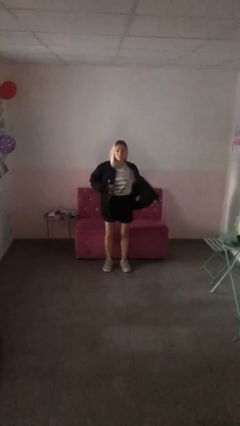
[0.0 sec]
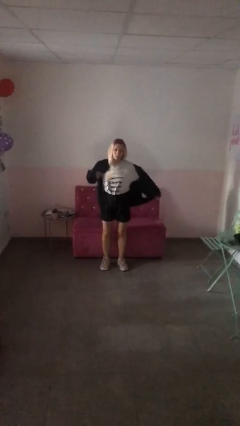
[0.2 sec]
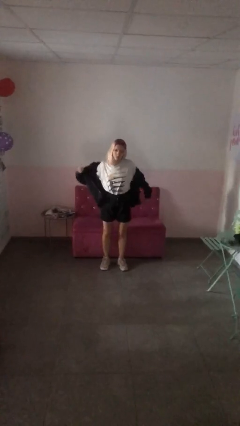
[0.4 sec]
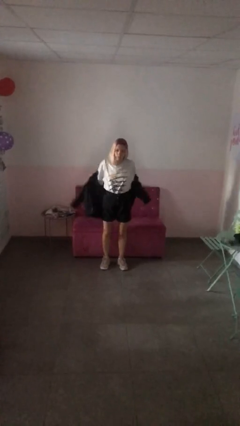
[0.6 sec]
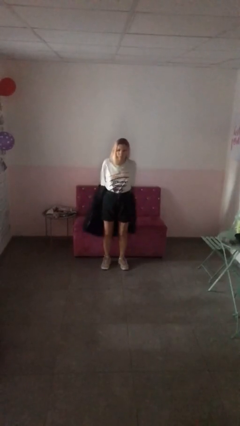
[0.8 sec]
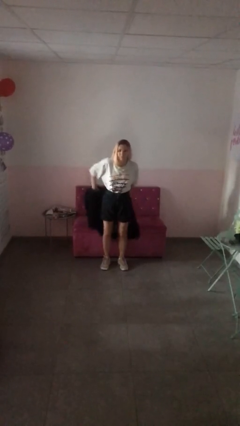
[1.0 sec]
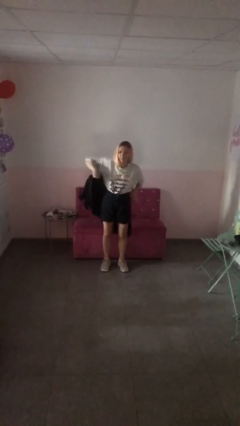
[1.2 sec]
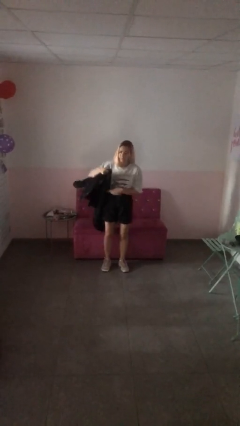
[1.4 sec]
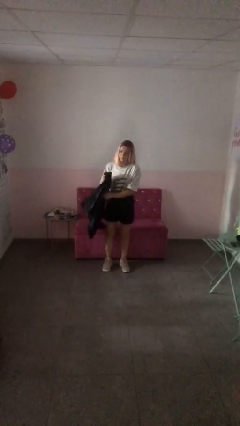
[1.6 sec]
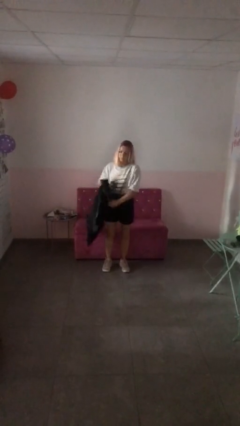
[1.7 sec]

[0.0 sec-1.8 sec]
person takes off jacket

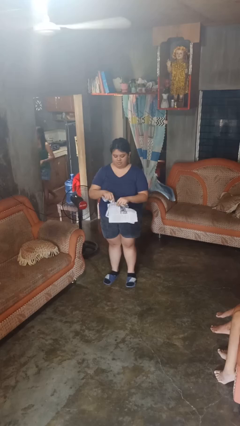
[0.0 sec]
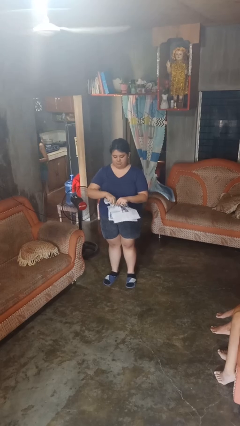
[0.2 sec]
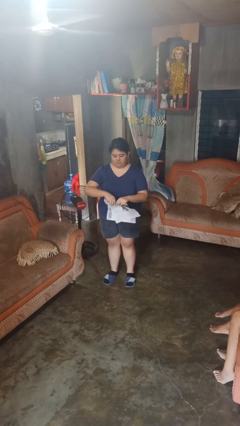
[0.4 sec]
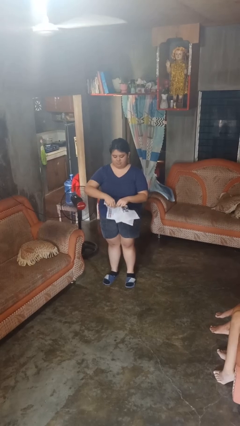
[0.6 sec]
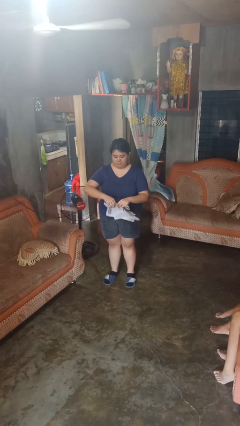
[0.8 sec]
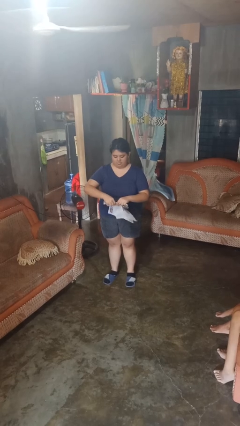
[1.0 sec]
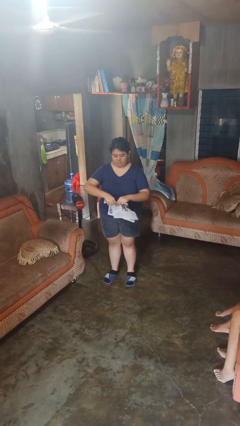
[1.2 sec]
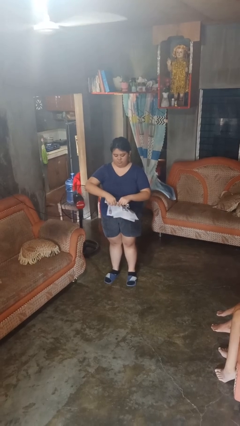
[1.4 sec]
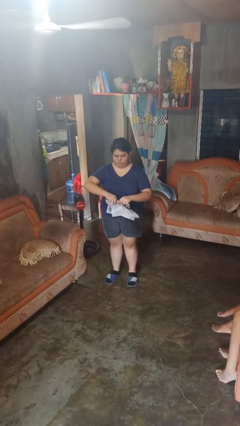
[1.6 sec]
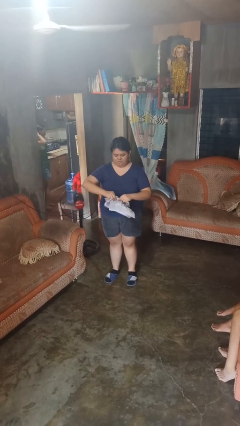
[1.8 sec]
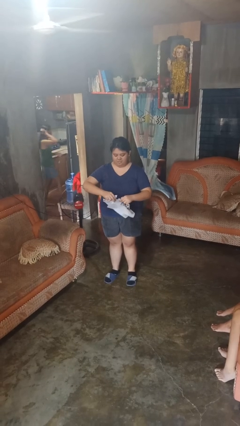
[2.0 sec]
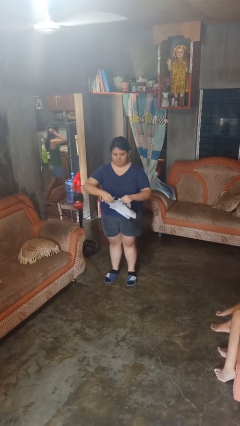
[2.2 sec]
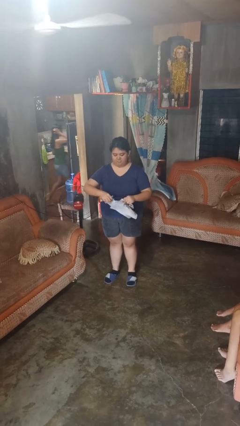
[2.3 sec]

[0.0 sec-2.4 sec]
person tears paper

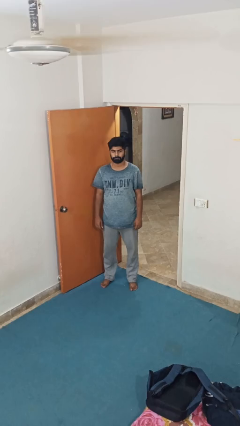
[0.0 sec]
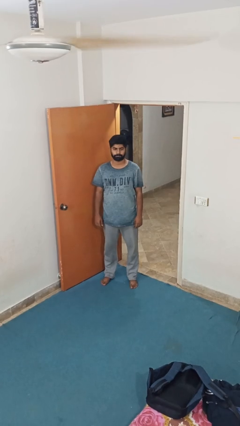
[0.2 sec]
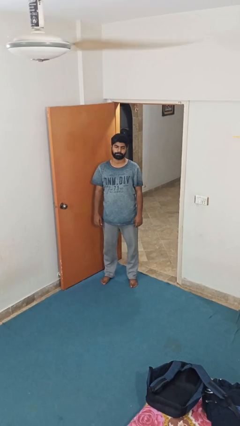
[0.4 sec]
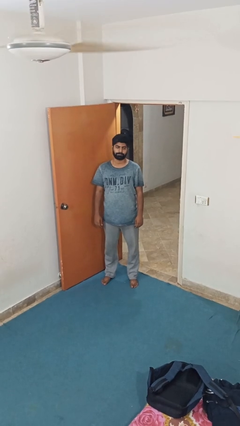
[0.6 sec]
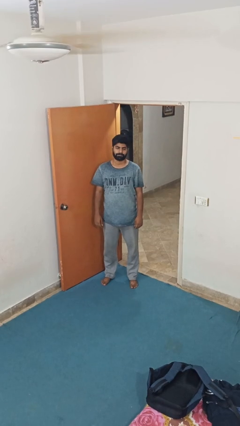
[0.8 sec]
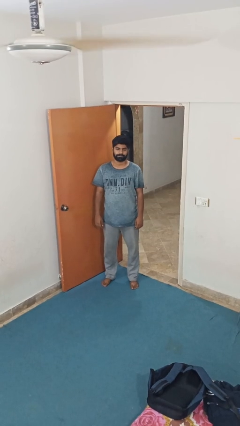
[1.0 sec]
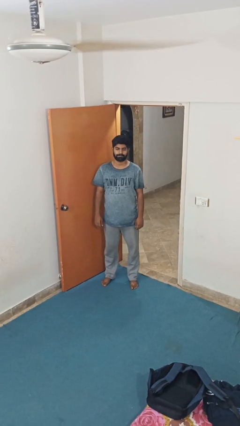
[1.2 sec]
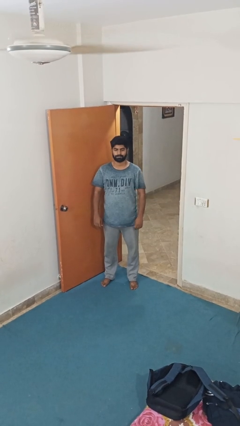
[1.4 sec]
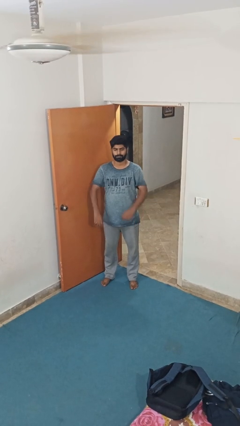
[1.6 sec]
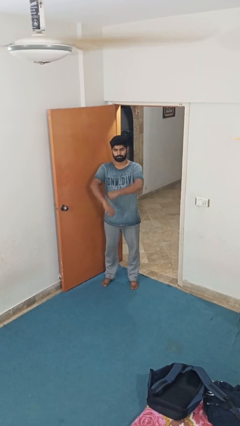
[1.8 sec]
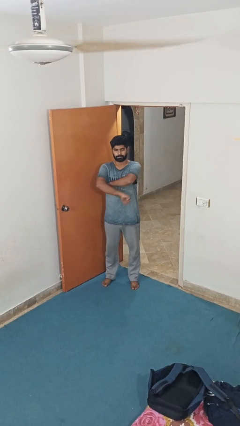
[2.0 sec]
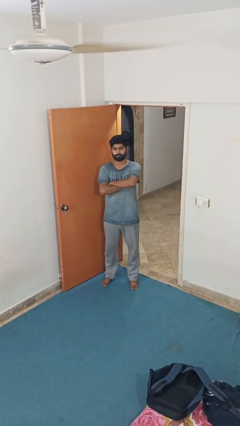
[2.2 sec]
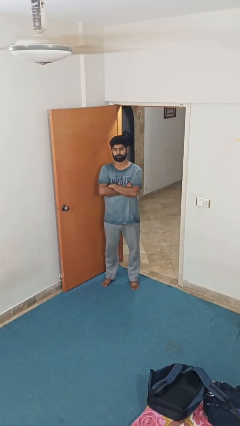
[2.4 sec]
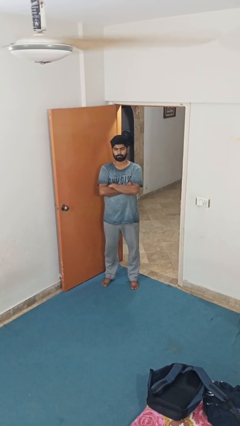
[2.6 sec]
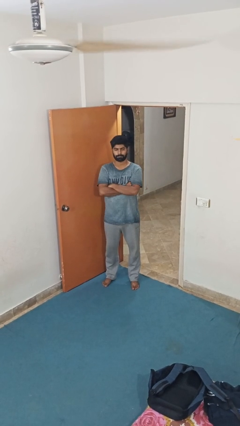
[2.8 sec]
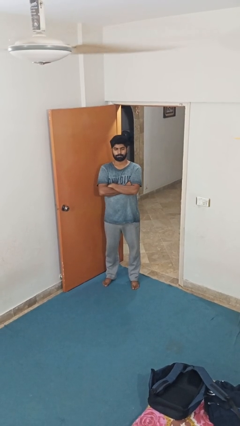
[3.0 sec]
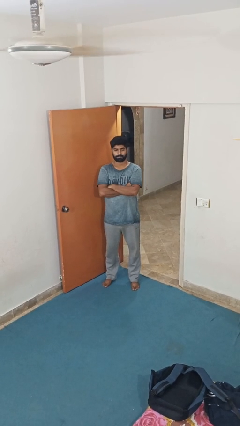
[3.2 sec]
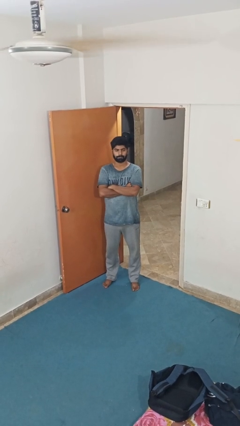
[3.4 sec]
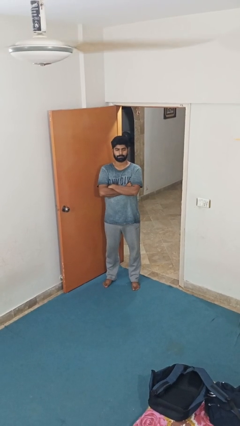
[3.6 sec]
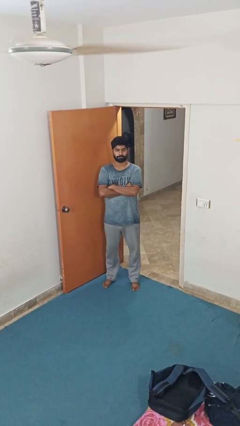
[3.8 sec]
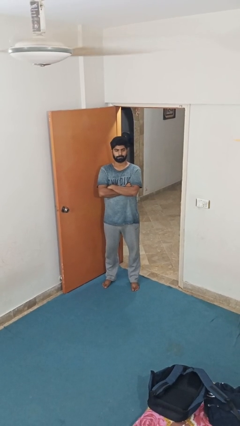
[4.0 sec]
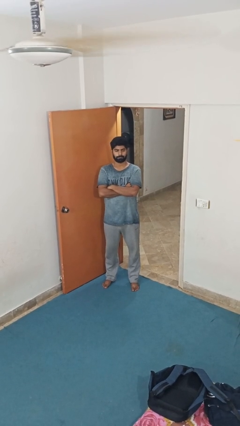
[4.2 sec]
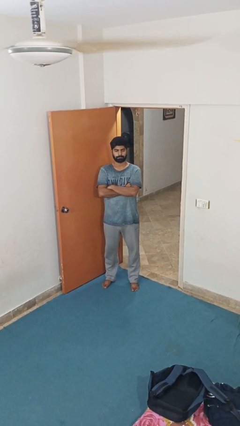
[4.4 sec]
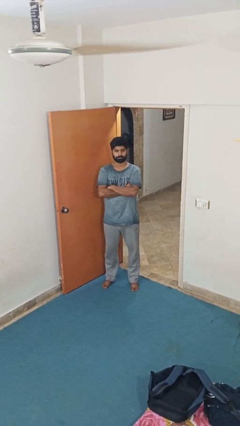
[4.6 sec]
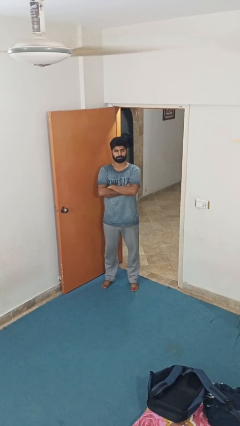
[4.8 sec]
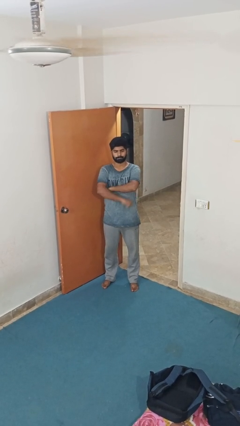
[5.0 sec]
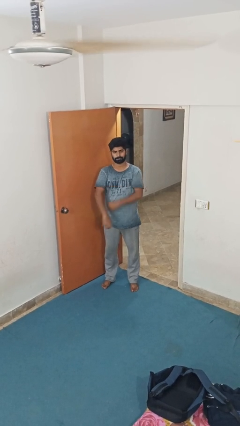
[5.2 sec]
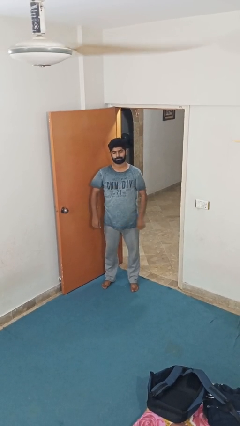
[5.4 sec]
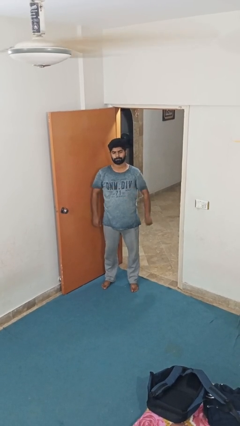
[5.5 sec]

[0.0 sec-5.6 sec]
person crosses arms

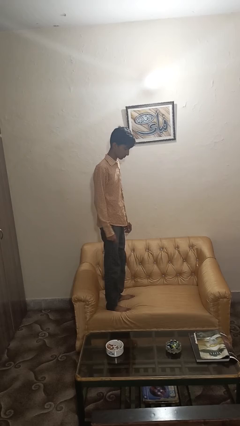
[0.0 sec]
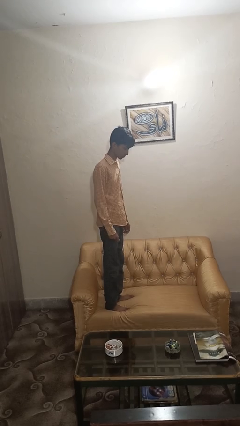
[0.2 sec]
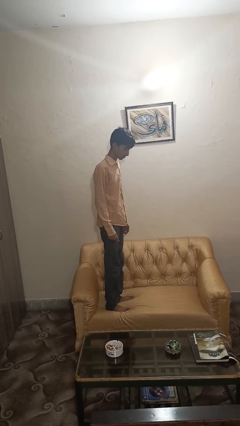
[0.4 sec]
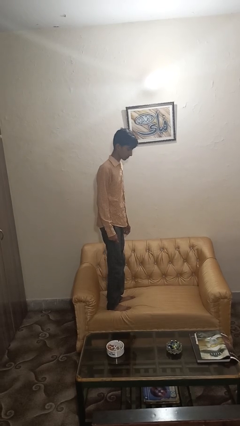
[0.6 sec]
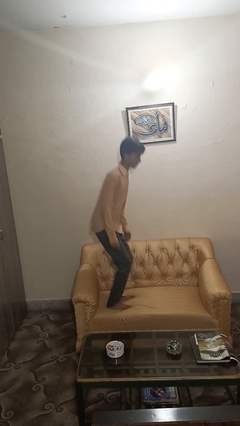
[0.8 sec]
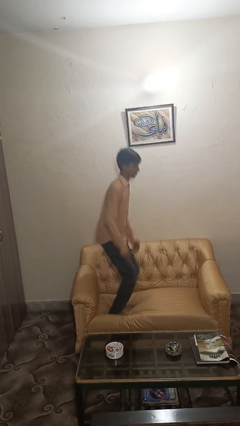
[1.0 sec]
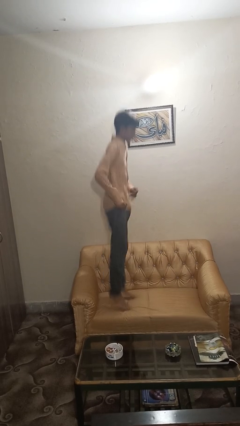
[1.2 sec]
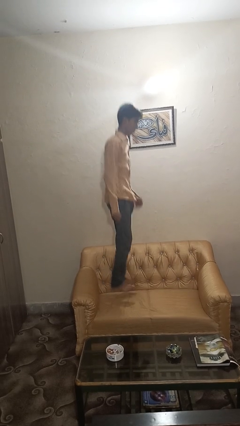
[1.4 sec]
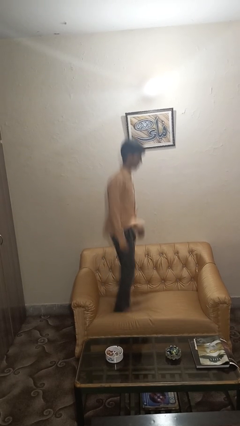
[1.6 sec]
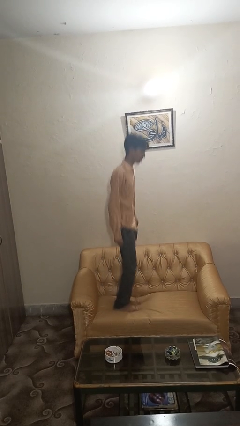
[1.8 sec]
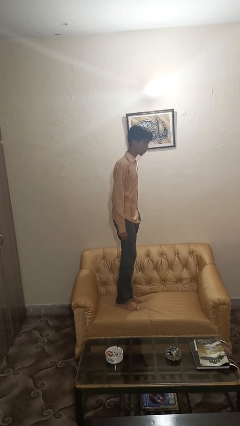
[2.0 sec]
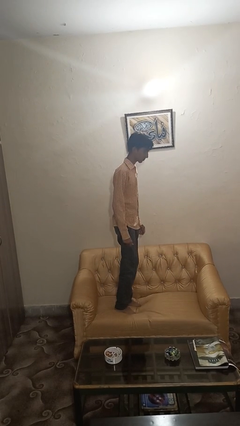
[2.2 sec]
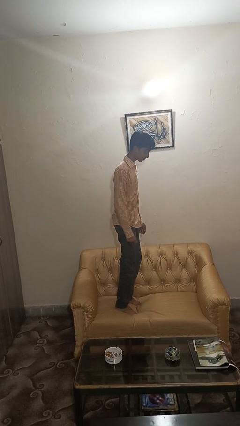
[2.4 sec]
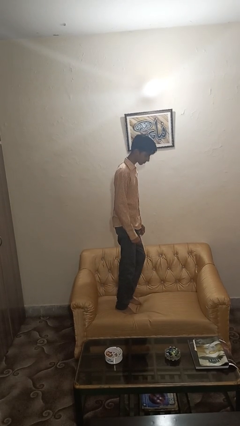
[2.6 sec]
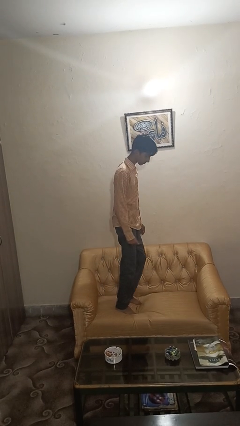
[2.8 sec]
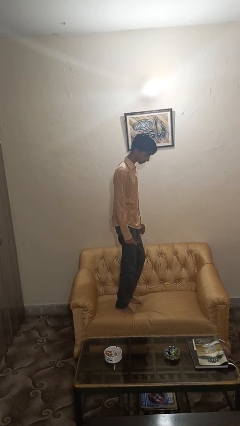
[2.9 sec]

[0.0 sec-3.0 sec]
person jumps on couch

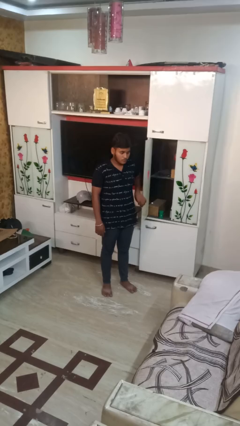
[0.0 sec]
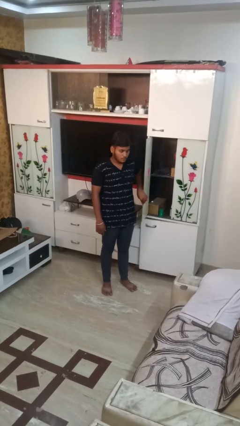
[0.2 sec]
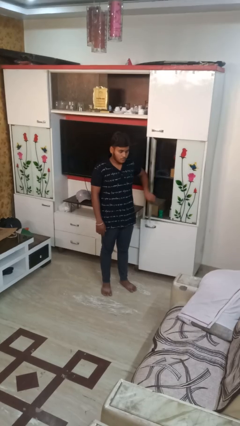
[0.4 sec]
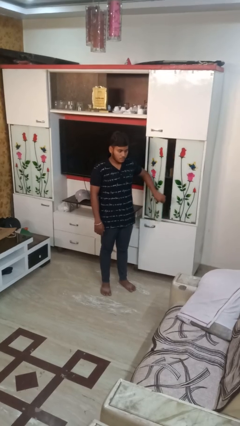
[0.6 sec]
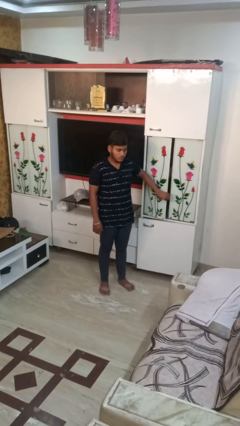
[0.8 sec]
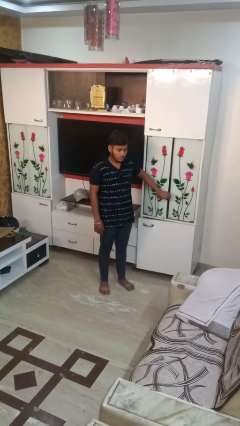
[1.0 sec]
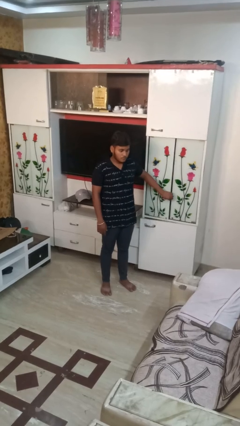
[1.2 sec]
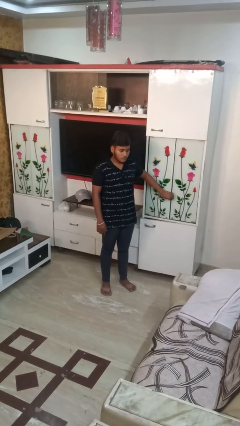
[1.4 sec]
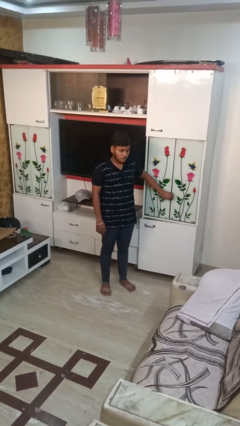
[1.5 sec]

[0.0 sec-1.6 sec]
person closes closet door

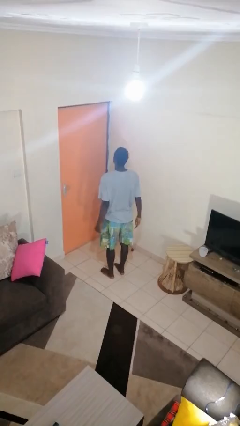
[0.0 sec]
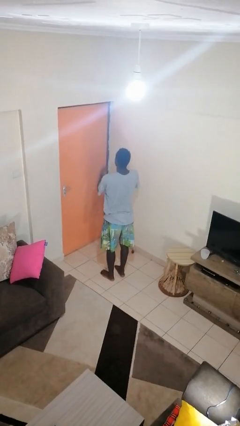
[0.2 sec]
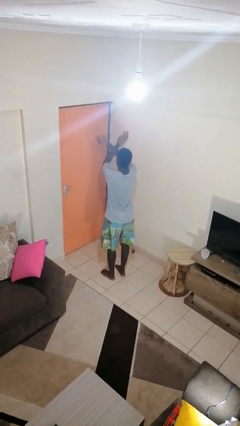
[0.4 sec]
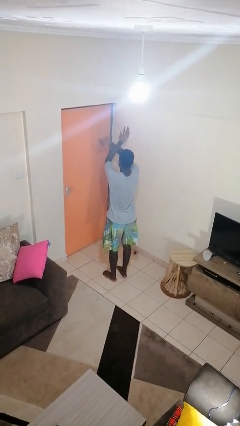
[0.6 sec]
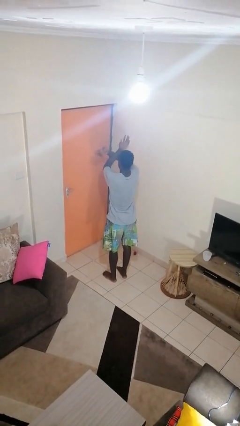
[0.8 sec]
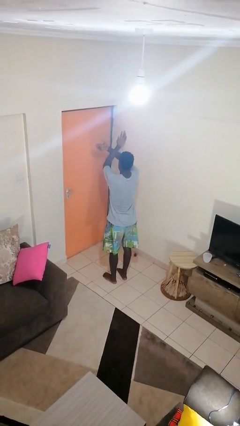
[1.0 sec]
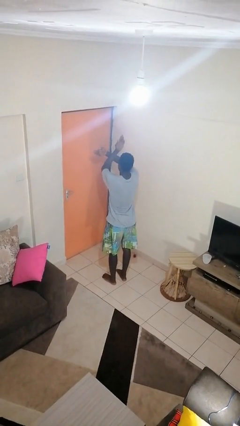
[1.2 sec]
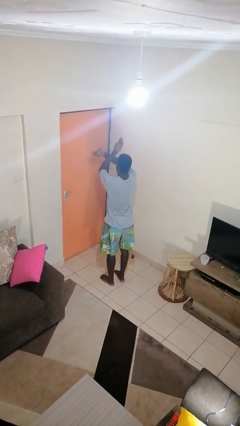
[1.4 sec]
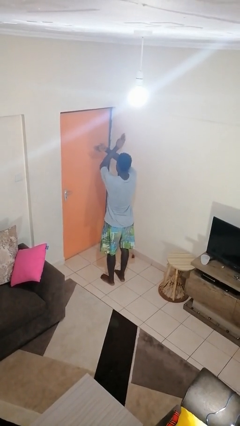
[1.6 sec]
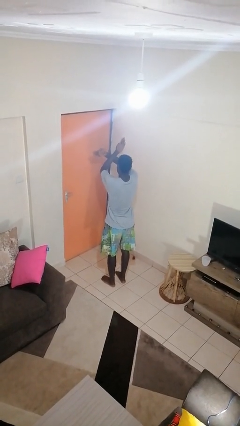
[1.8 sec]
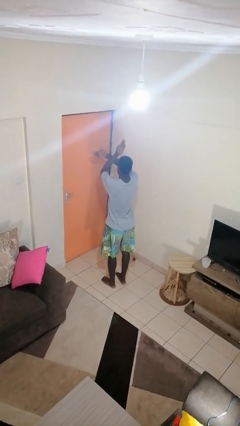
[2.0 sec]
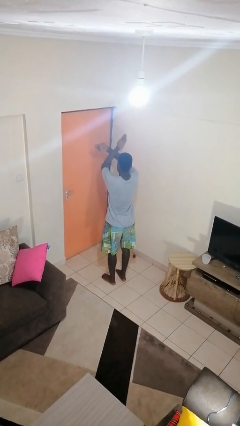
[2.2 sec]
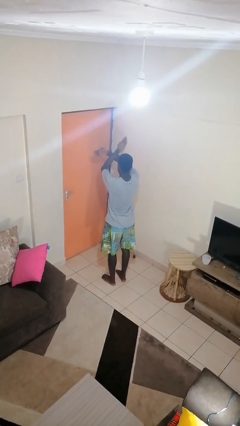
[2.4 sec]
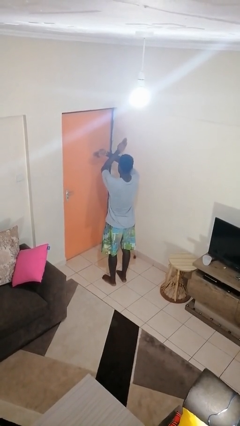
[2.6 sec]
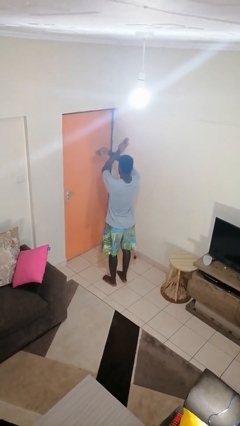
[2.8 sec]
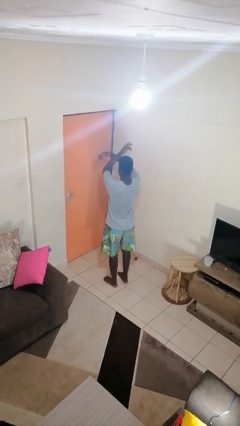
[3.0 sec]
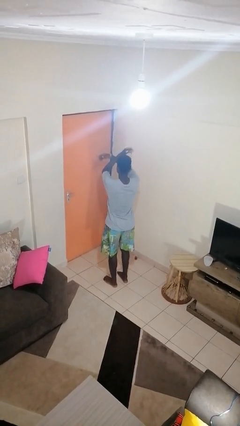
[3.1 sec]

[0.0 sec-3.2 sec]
person gestures arms x
